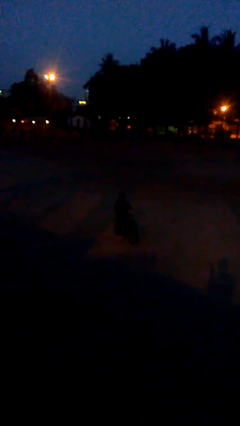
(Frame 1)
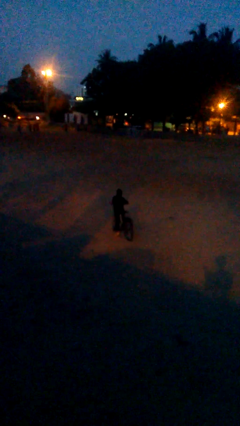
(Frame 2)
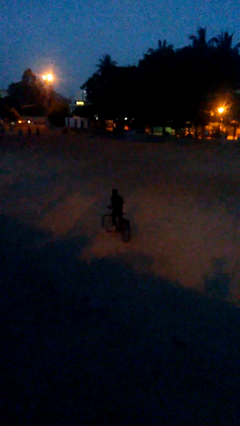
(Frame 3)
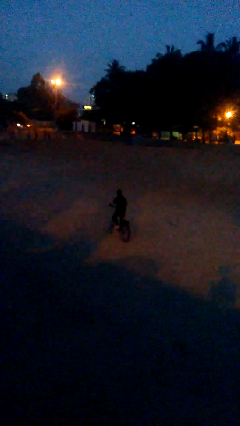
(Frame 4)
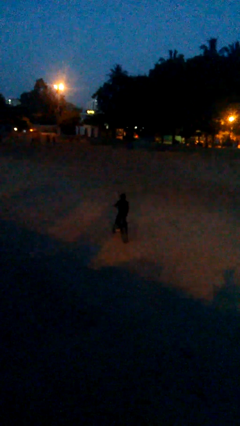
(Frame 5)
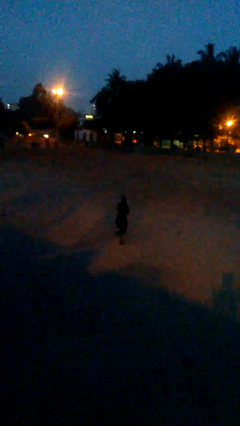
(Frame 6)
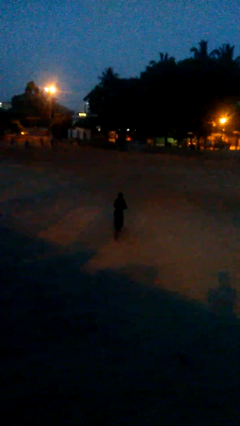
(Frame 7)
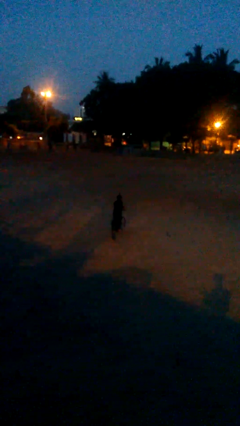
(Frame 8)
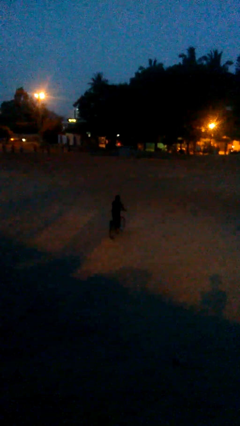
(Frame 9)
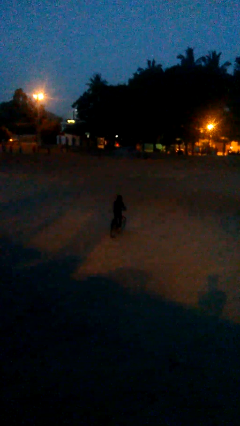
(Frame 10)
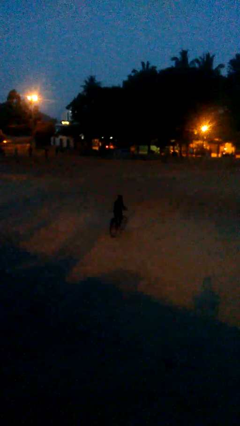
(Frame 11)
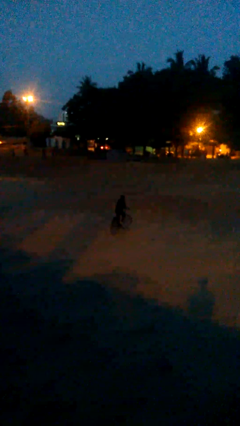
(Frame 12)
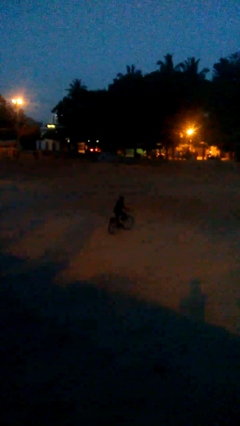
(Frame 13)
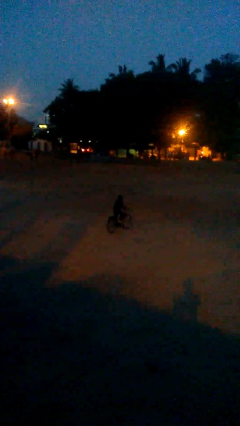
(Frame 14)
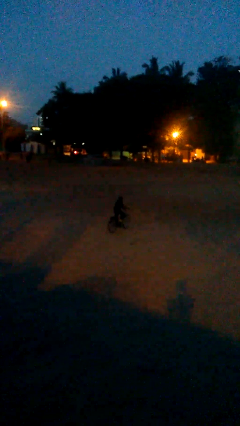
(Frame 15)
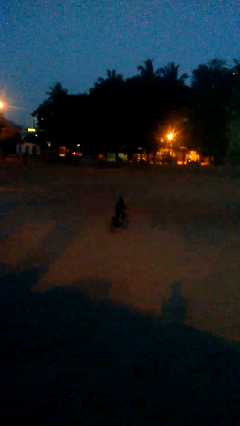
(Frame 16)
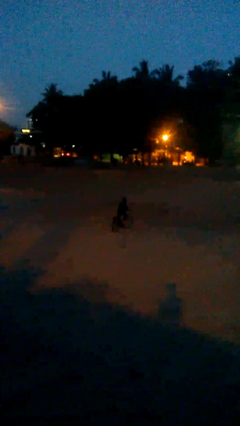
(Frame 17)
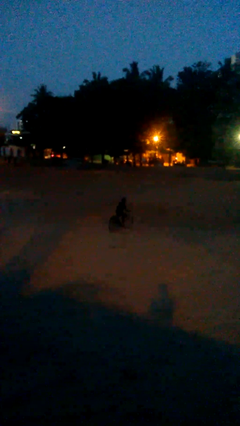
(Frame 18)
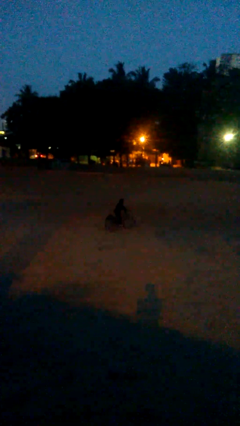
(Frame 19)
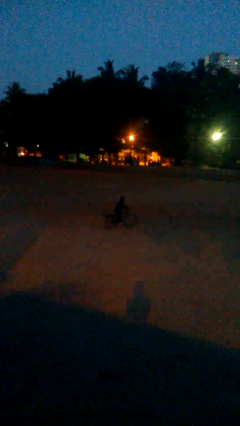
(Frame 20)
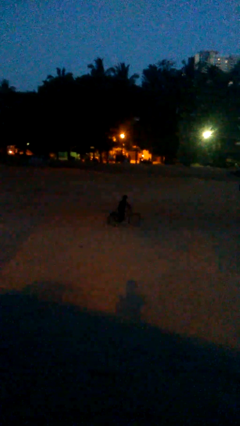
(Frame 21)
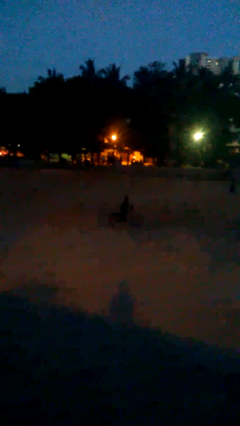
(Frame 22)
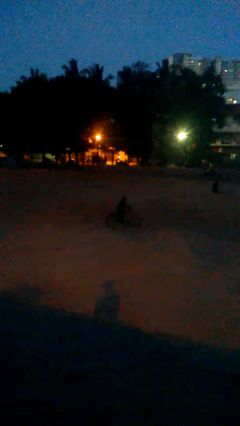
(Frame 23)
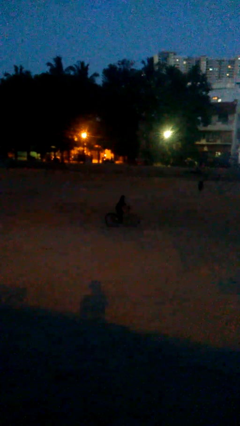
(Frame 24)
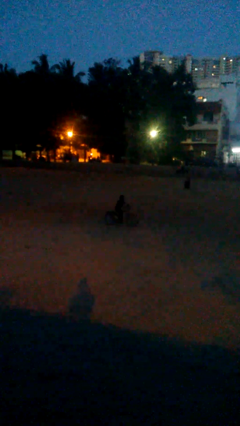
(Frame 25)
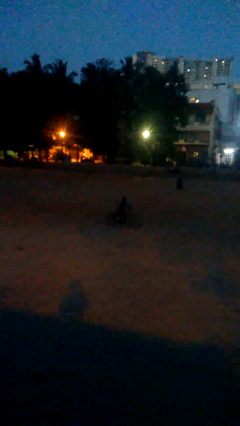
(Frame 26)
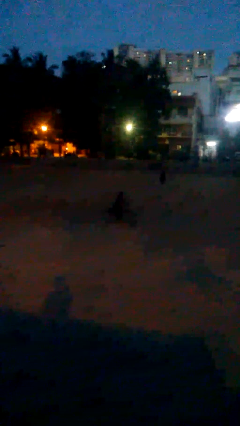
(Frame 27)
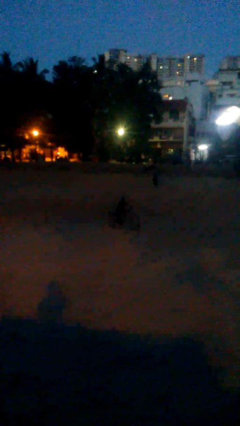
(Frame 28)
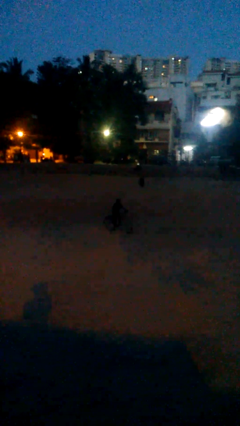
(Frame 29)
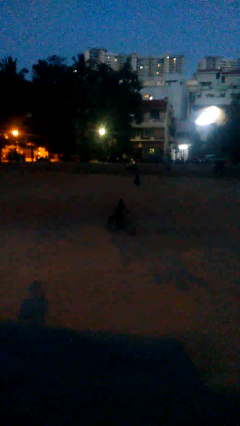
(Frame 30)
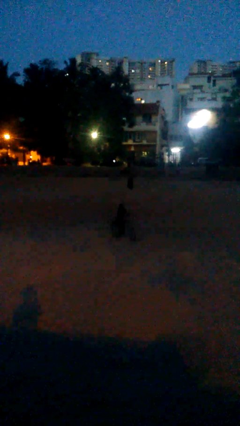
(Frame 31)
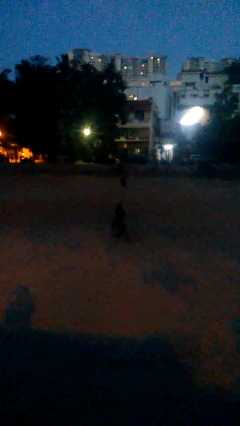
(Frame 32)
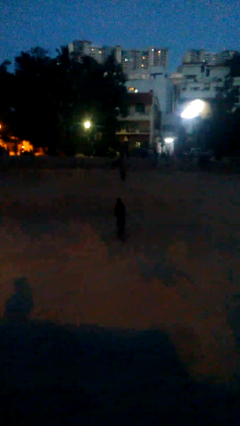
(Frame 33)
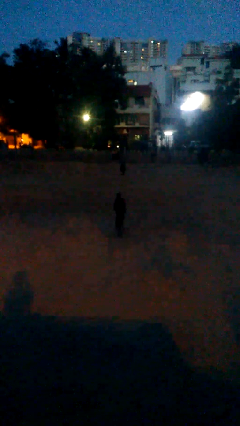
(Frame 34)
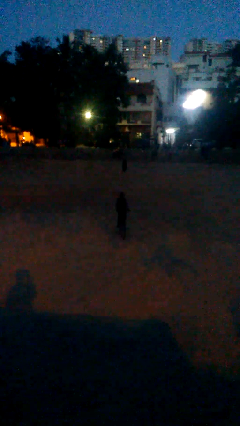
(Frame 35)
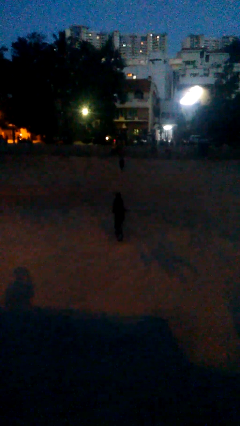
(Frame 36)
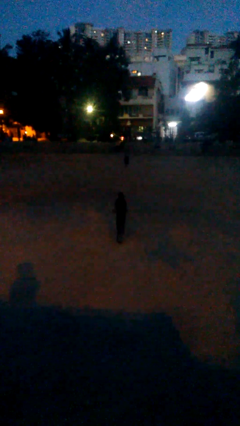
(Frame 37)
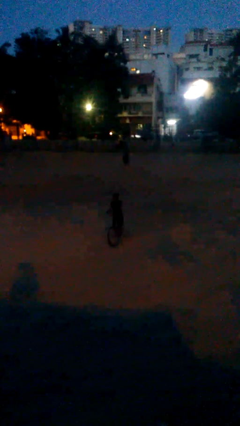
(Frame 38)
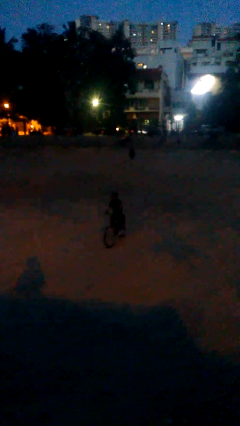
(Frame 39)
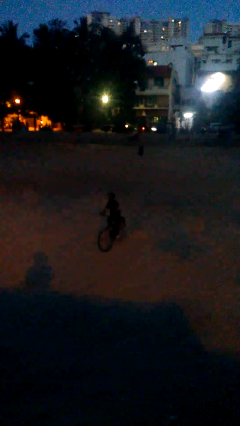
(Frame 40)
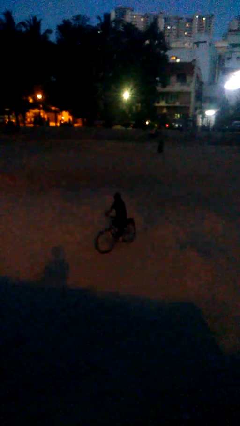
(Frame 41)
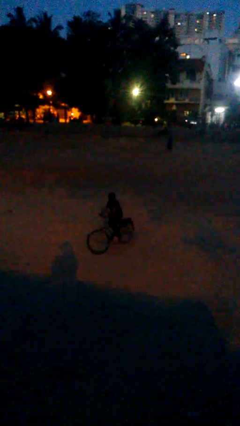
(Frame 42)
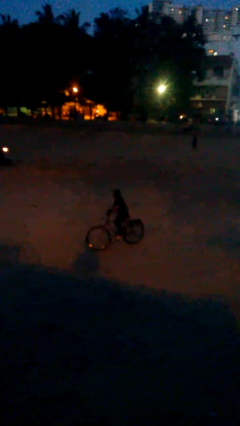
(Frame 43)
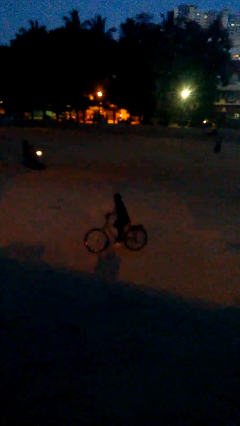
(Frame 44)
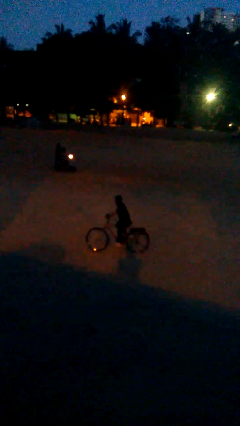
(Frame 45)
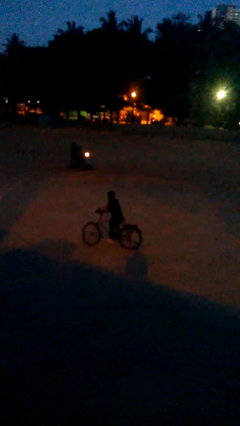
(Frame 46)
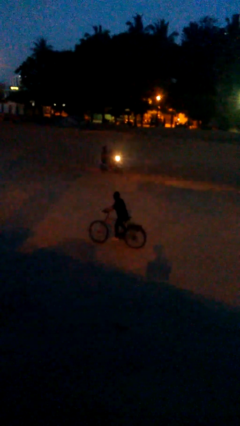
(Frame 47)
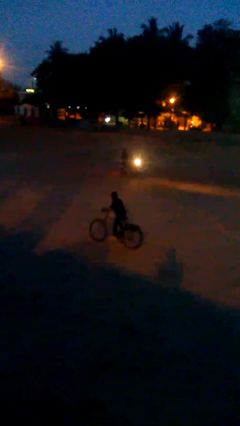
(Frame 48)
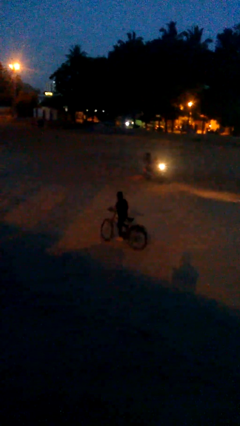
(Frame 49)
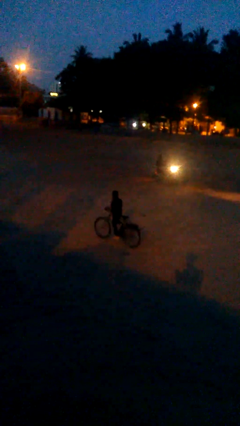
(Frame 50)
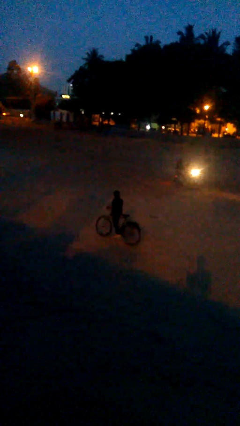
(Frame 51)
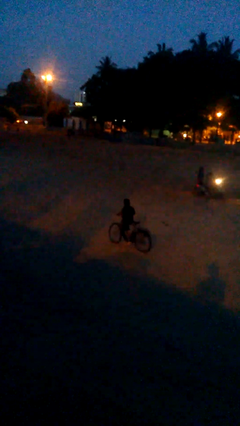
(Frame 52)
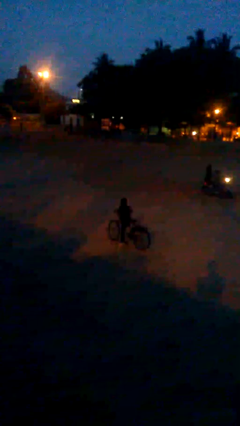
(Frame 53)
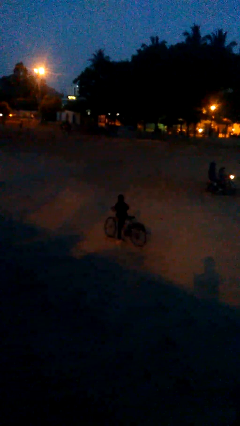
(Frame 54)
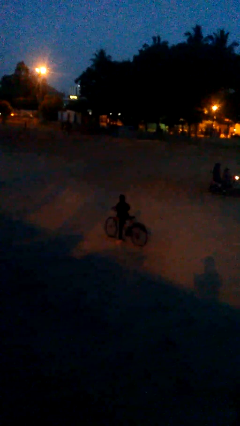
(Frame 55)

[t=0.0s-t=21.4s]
person rides bicycle

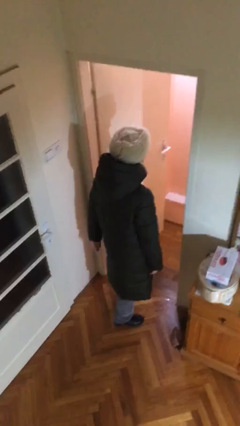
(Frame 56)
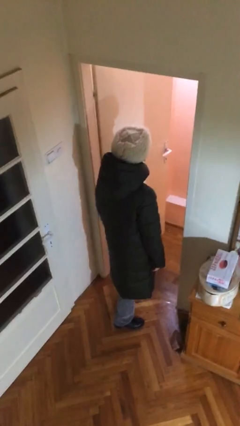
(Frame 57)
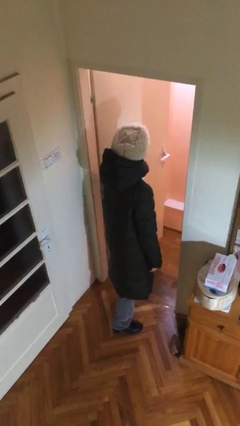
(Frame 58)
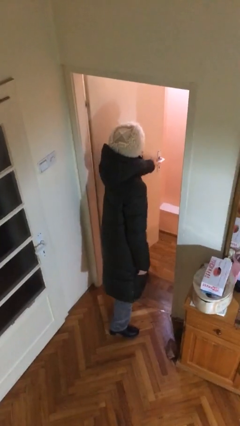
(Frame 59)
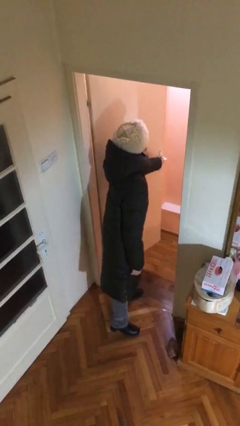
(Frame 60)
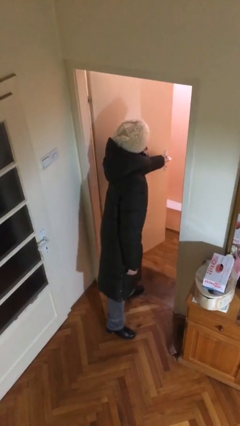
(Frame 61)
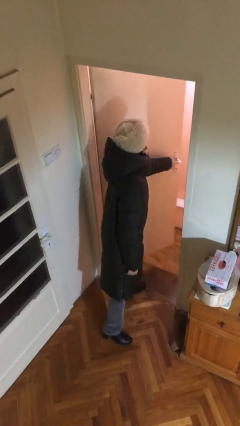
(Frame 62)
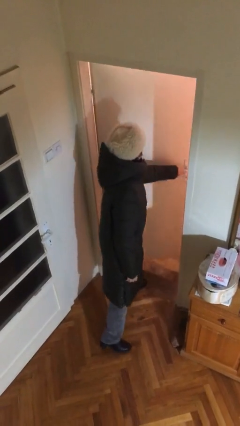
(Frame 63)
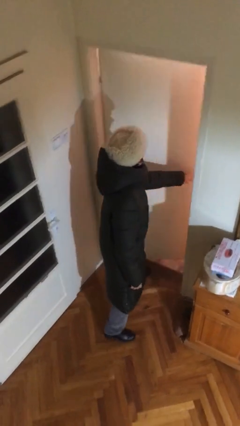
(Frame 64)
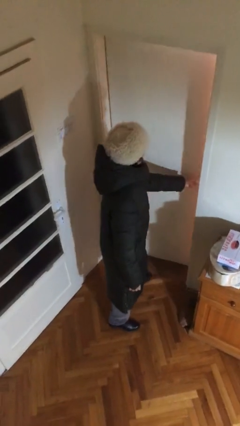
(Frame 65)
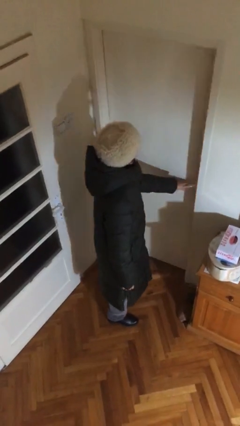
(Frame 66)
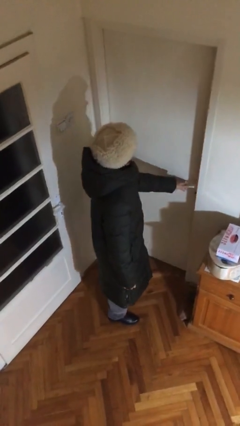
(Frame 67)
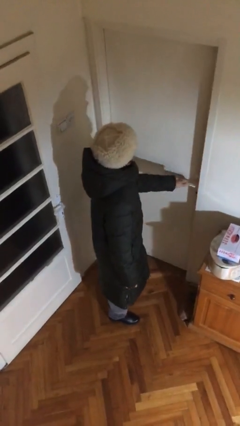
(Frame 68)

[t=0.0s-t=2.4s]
person closes facility door

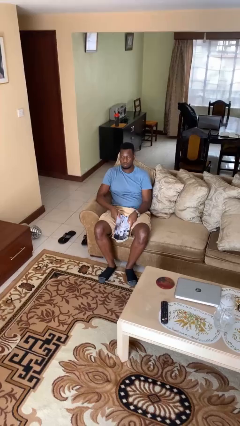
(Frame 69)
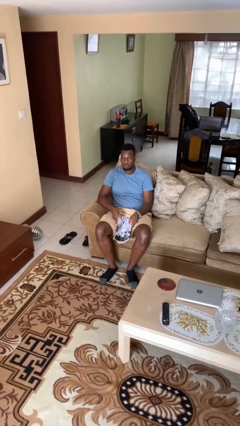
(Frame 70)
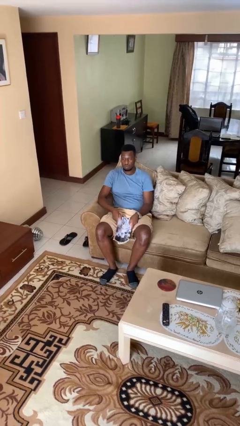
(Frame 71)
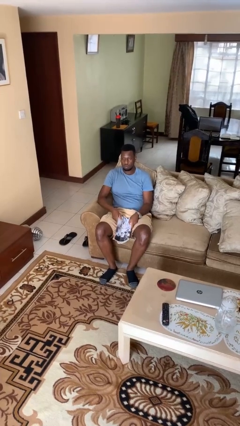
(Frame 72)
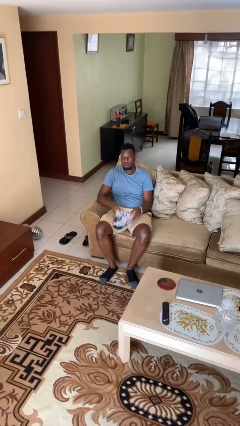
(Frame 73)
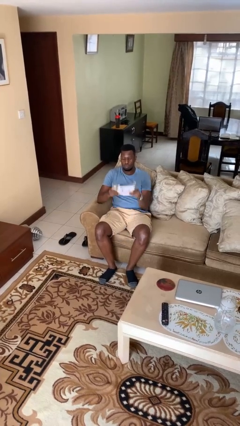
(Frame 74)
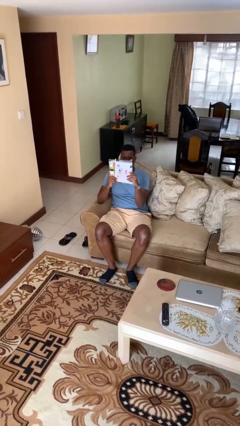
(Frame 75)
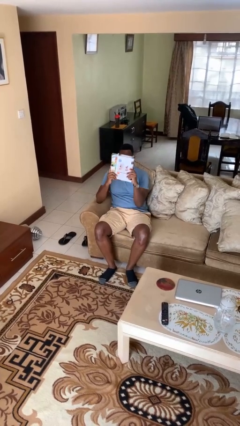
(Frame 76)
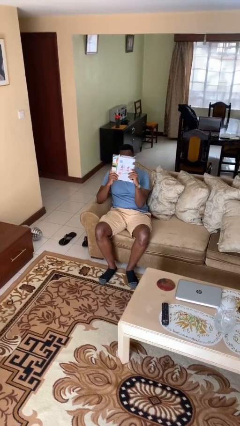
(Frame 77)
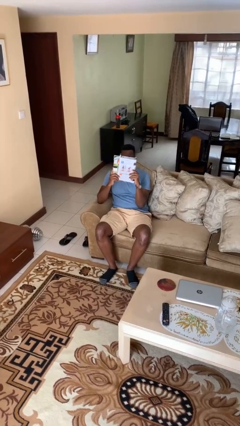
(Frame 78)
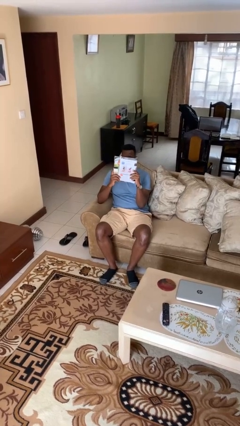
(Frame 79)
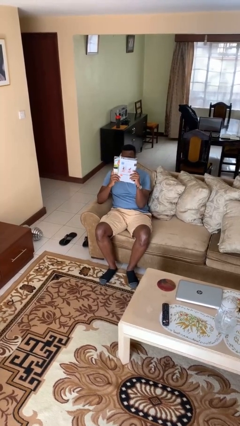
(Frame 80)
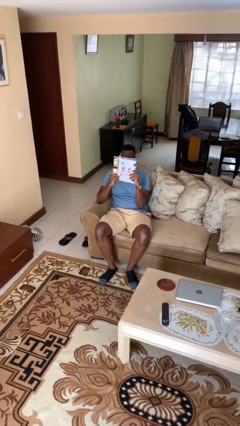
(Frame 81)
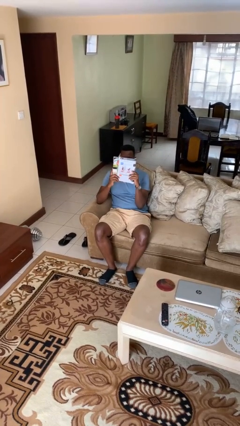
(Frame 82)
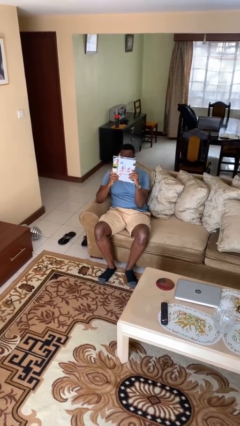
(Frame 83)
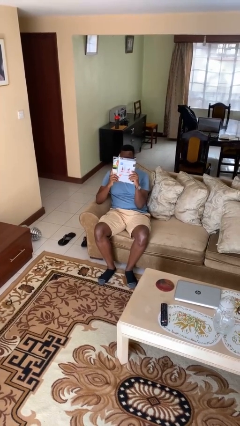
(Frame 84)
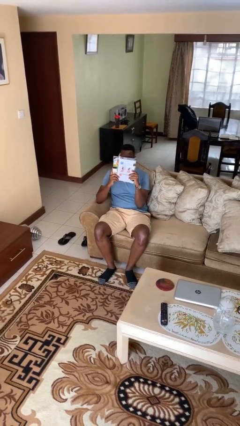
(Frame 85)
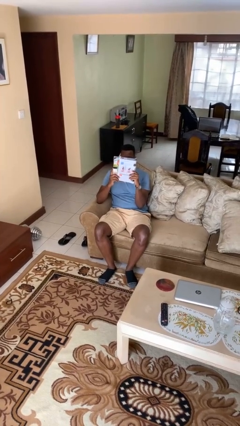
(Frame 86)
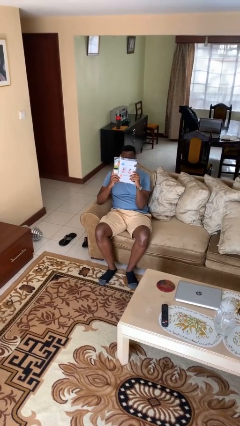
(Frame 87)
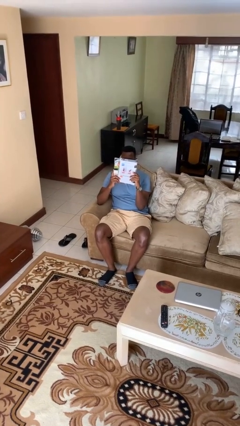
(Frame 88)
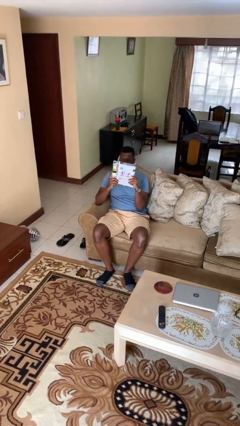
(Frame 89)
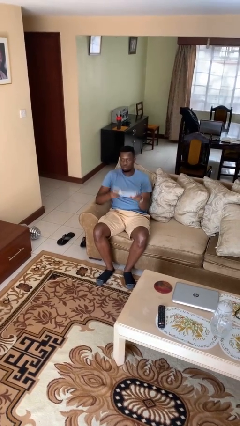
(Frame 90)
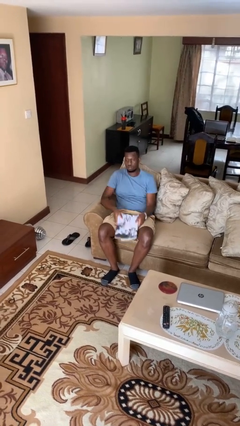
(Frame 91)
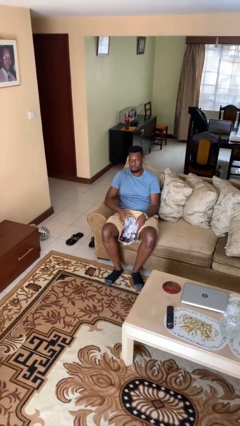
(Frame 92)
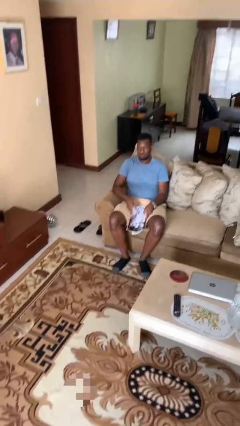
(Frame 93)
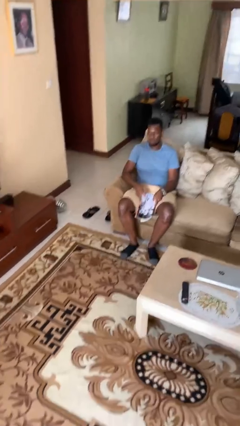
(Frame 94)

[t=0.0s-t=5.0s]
person reads document
